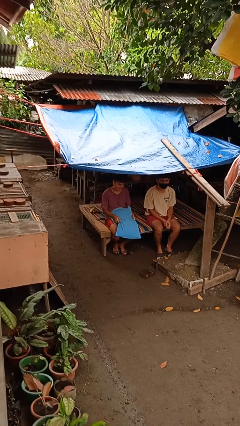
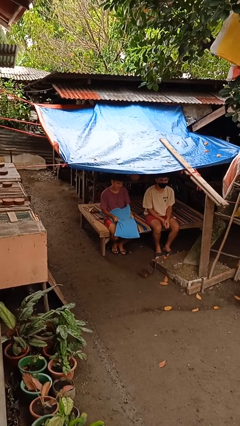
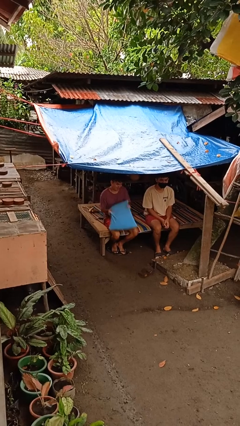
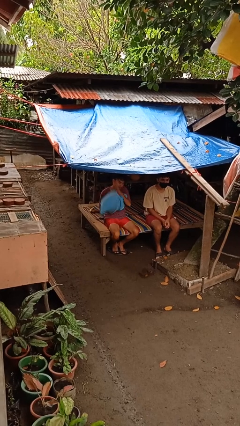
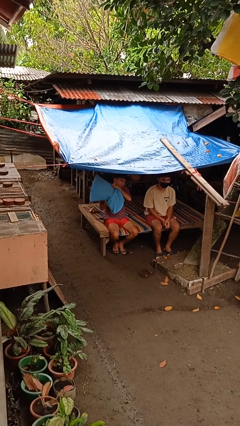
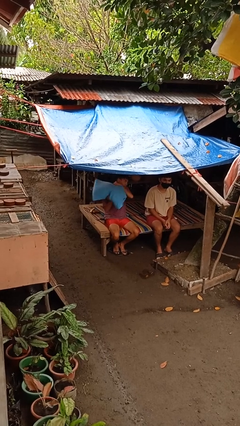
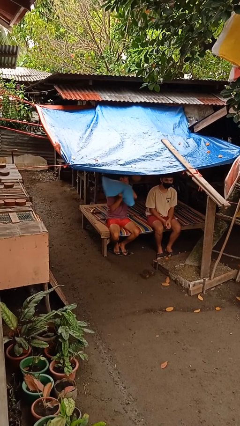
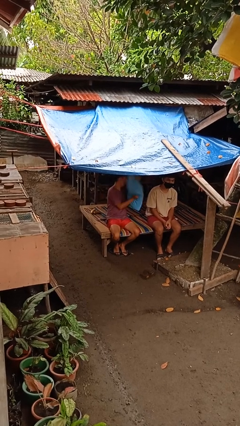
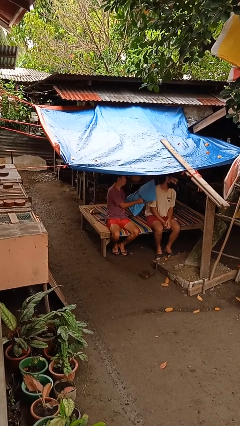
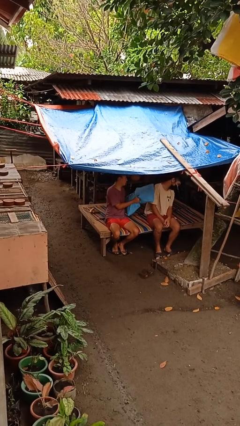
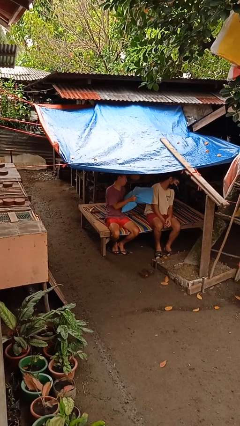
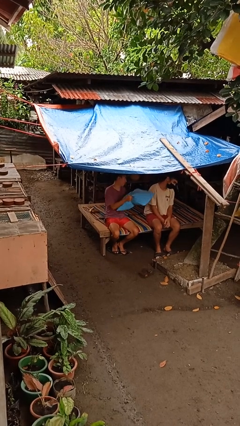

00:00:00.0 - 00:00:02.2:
person hits person with pillow

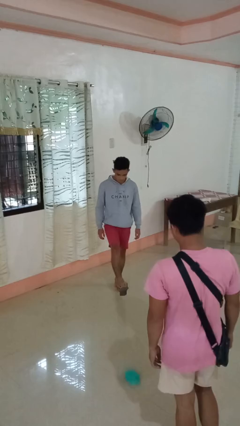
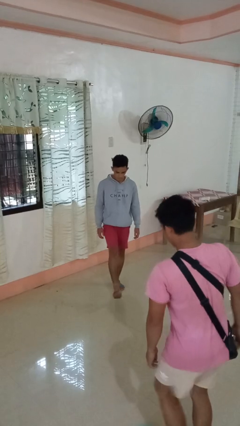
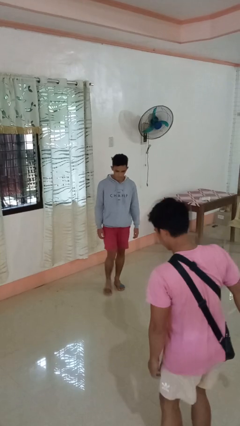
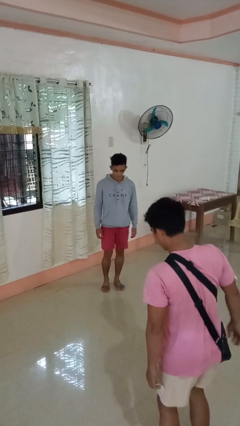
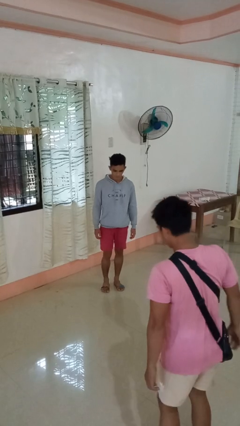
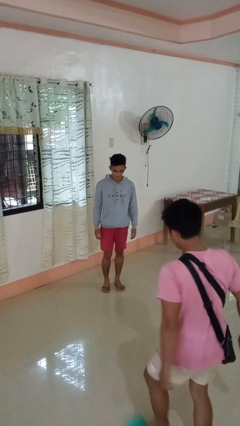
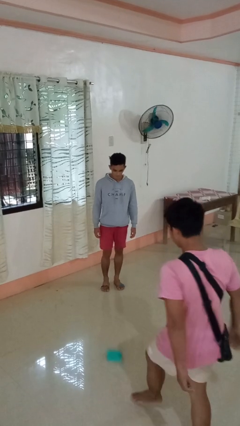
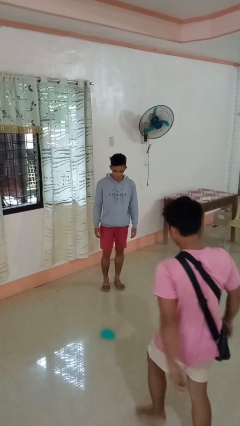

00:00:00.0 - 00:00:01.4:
person kicks object to person

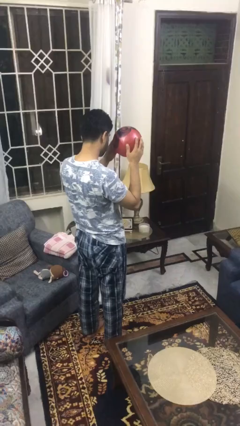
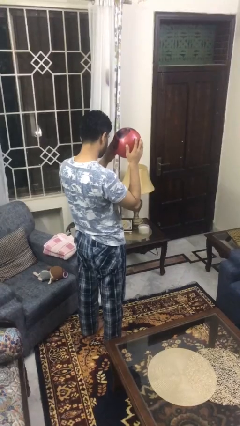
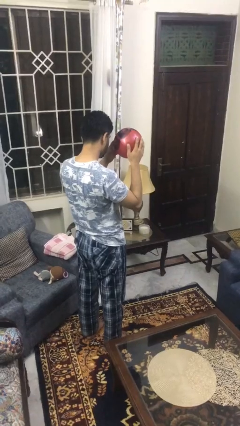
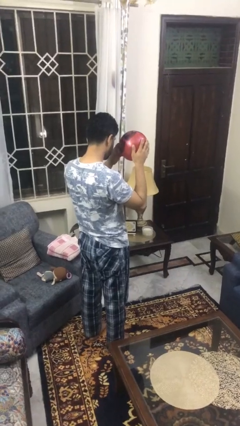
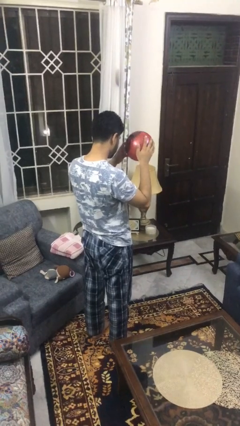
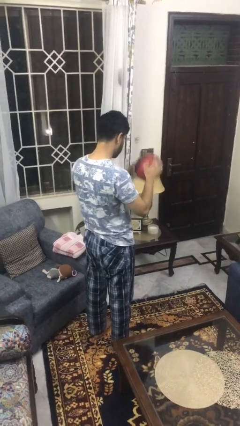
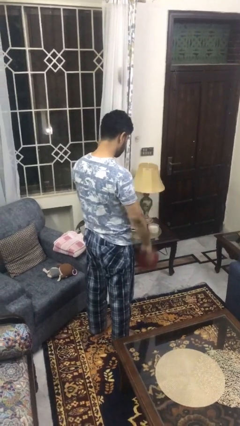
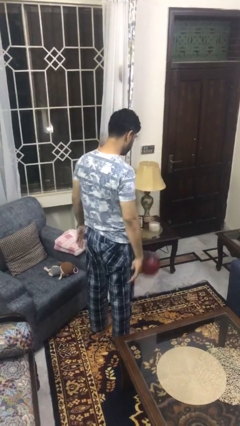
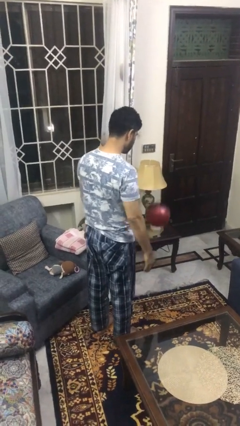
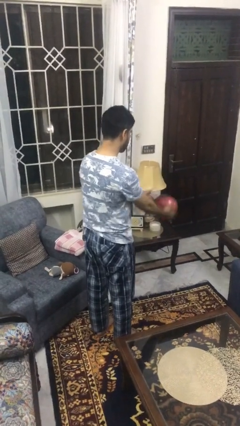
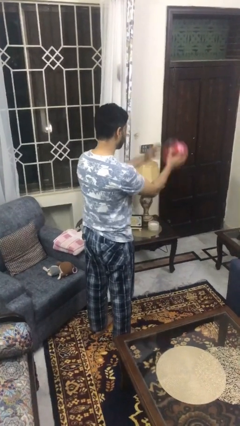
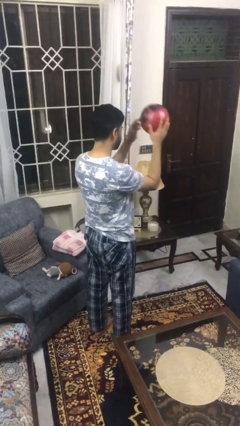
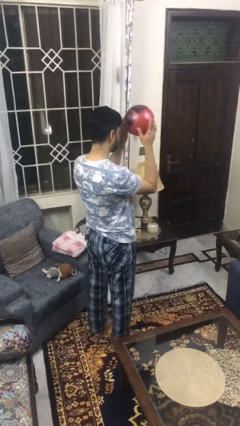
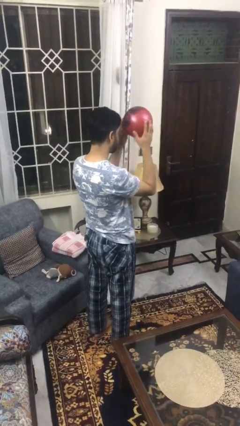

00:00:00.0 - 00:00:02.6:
person bounces ball on floor

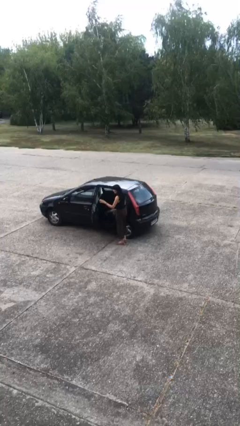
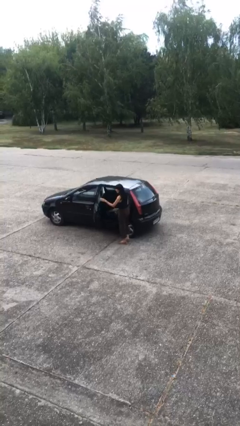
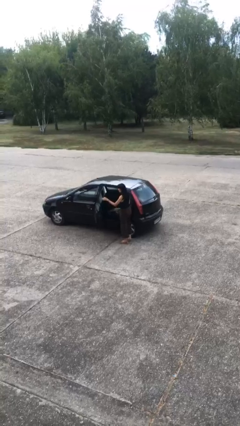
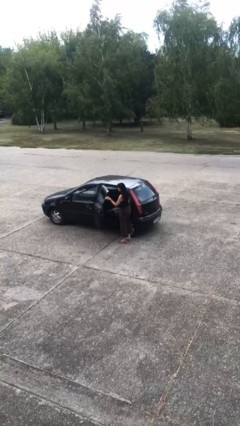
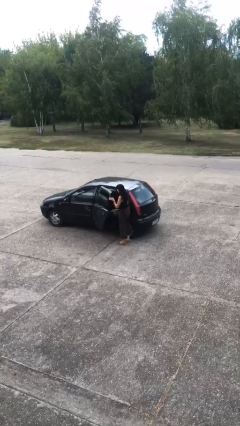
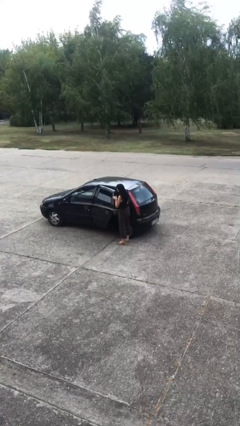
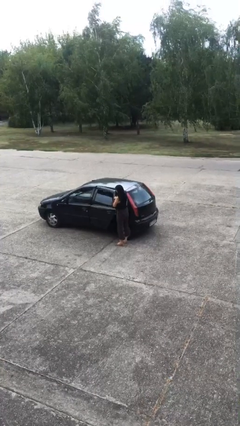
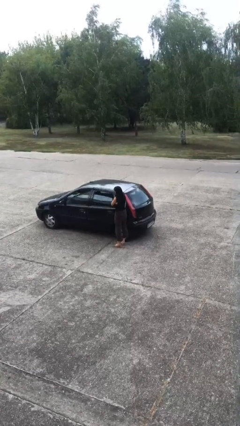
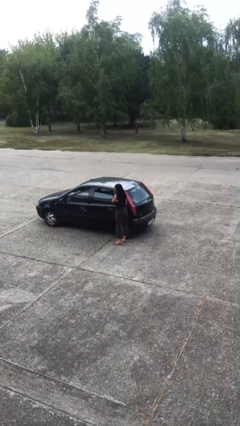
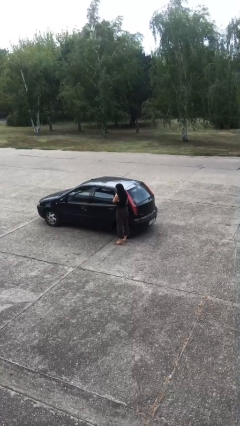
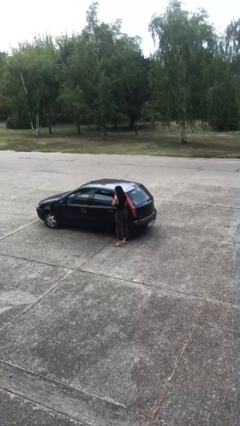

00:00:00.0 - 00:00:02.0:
person closes car door

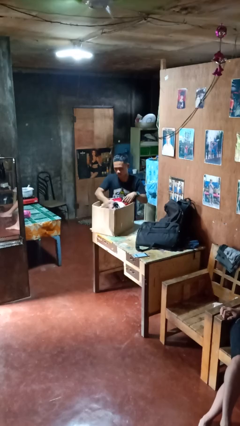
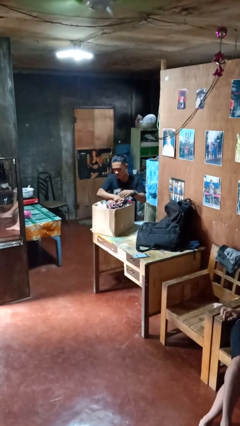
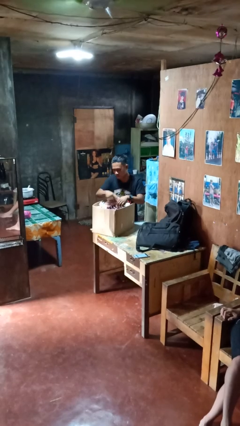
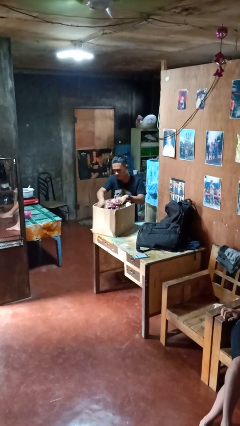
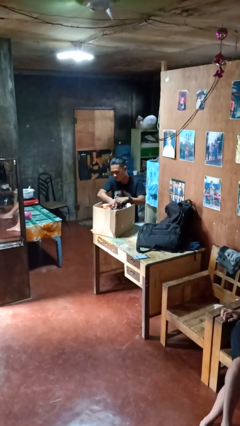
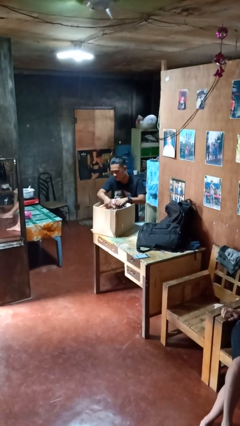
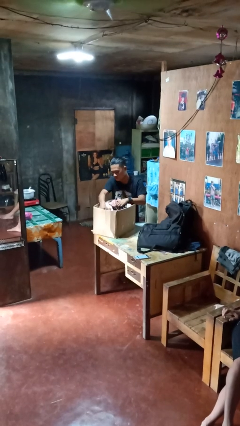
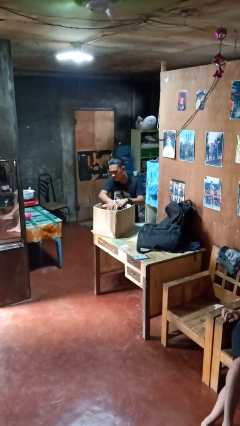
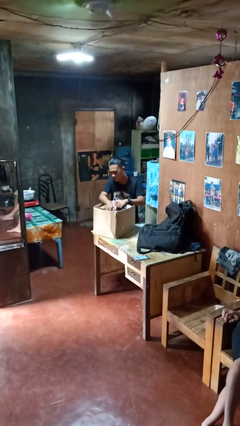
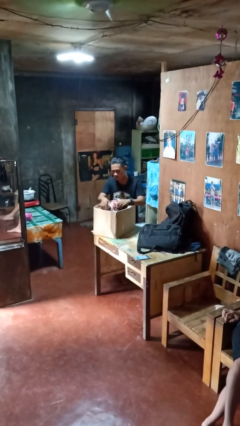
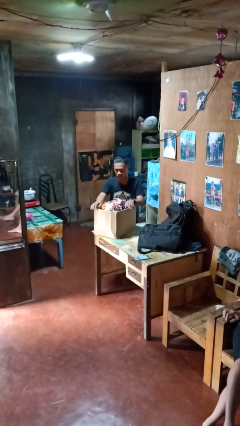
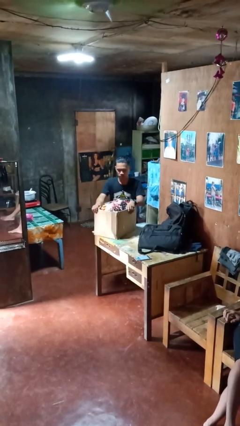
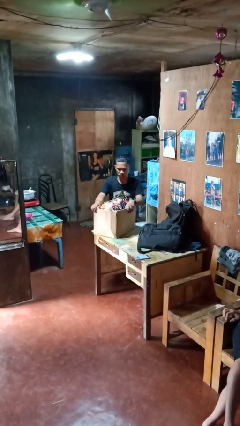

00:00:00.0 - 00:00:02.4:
person searches in box

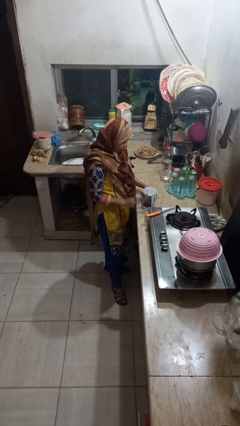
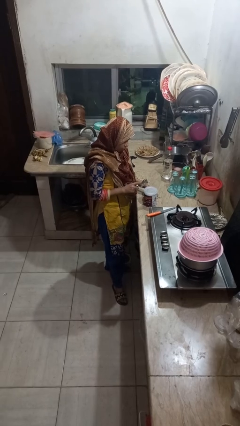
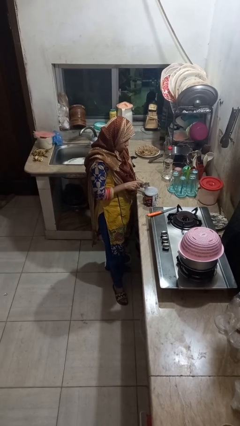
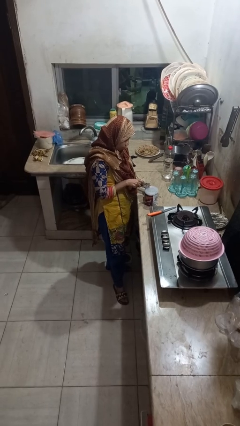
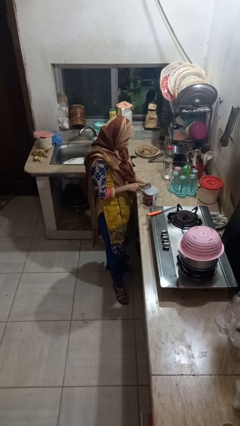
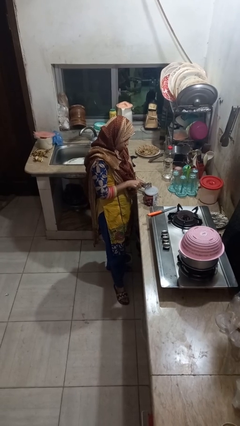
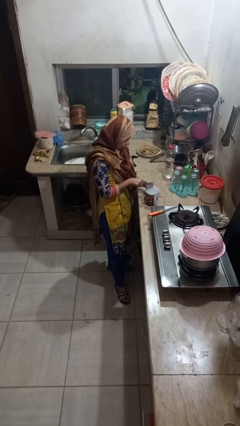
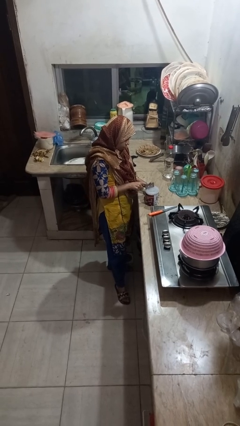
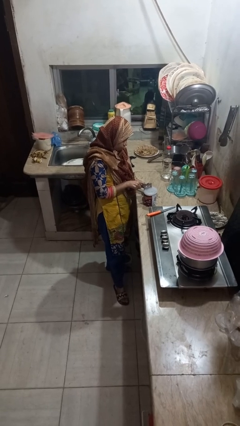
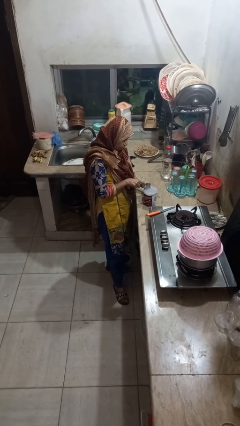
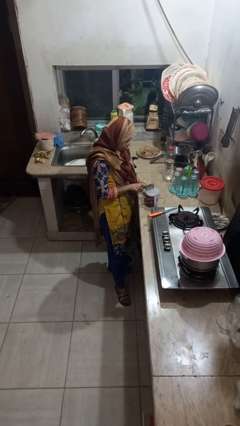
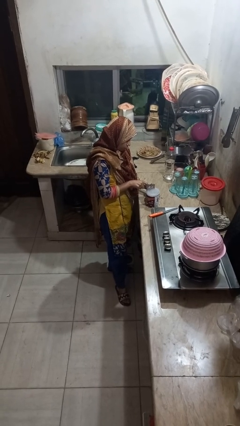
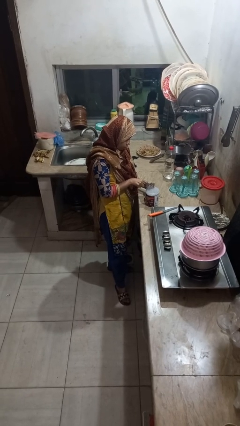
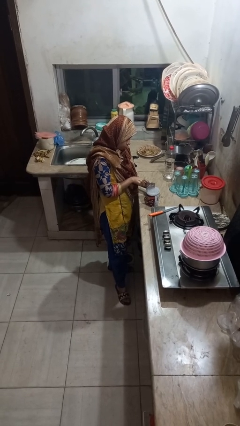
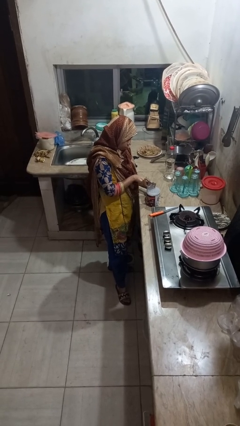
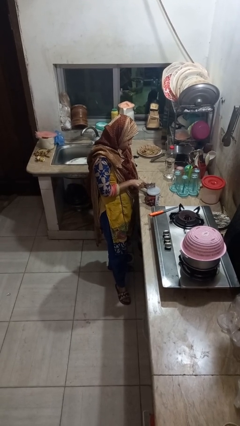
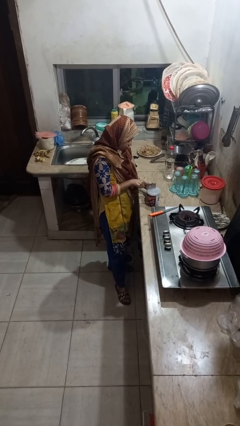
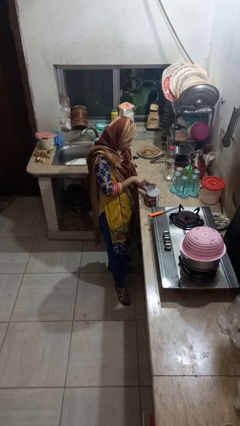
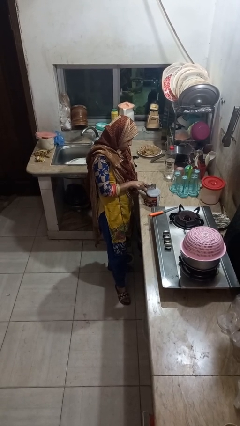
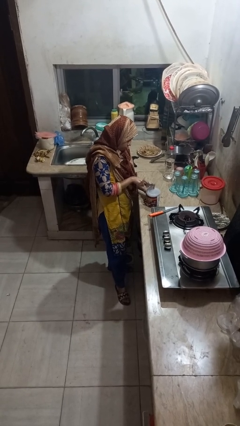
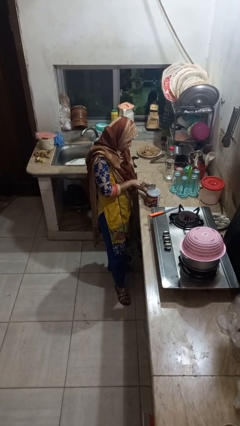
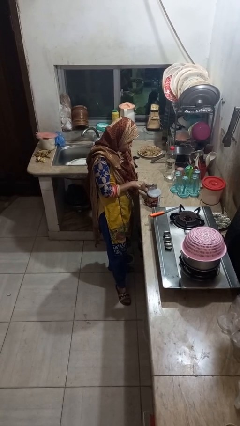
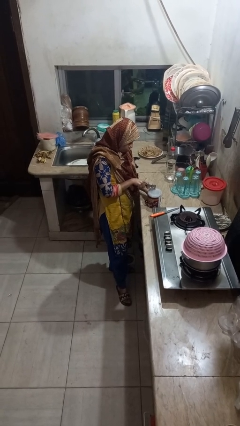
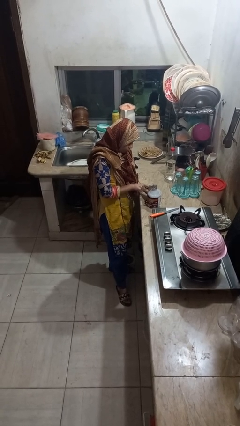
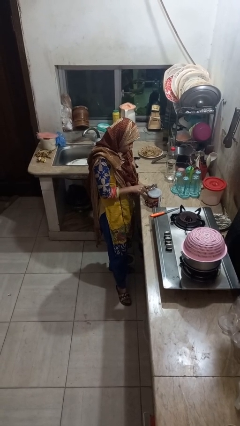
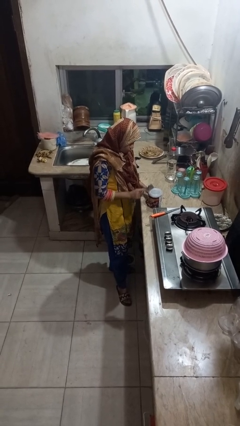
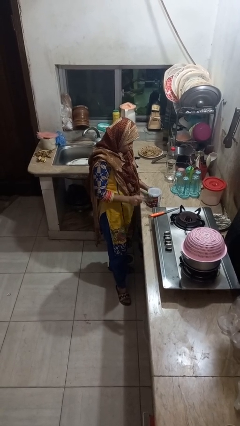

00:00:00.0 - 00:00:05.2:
person opens can with can opener

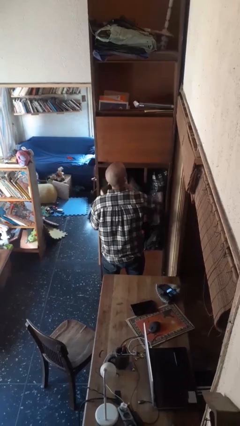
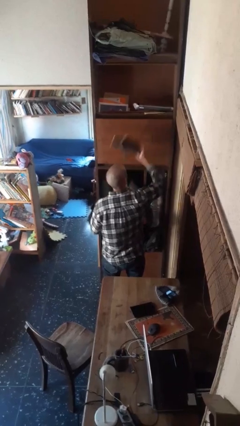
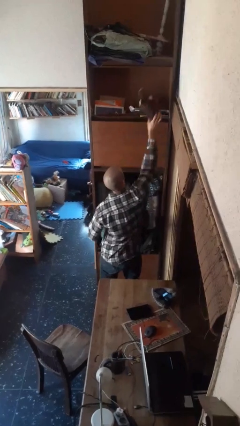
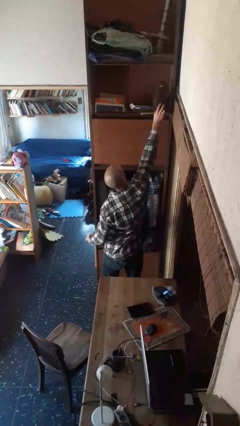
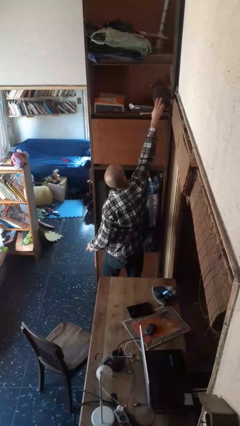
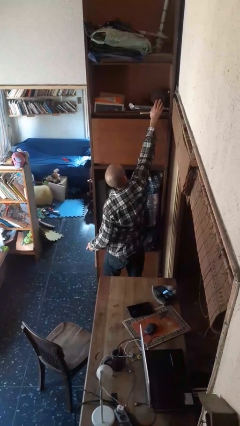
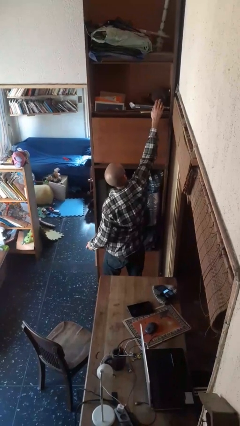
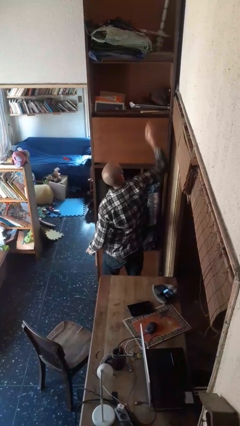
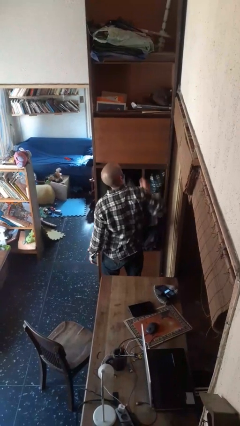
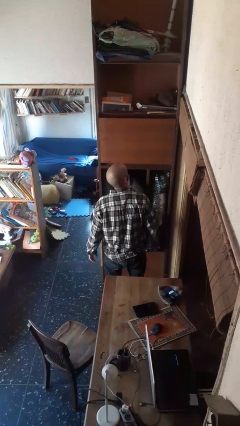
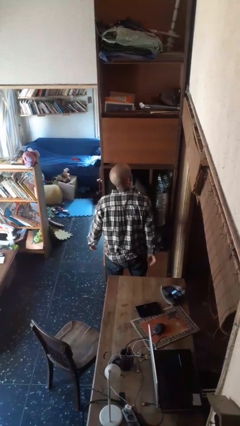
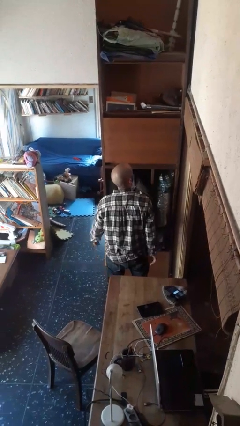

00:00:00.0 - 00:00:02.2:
person puts down object on shelf
